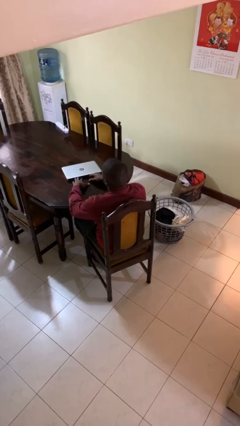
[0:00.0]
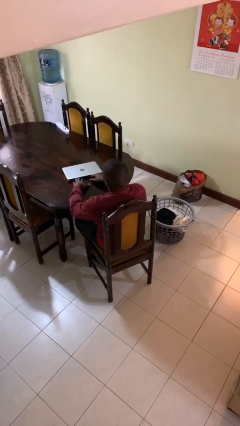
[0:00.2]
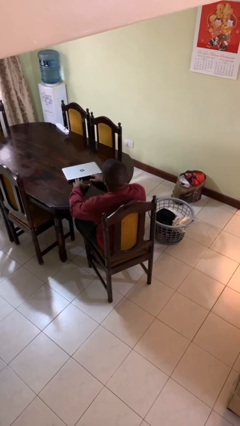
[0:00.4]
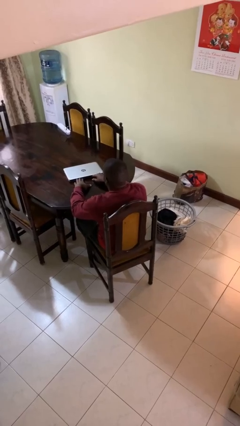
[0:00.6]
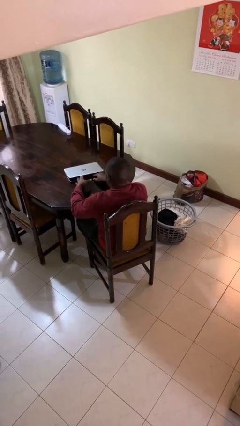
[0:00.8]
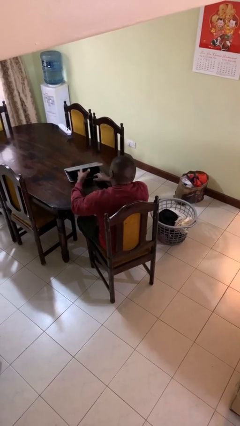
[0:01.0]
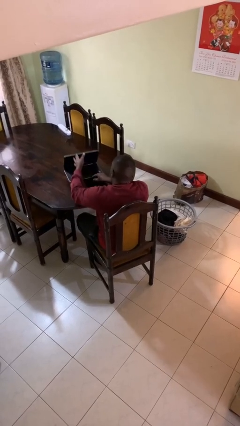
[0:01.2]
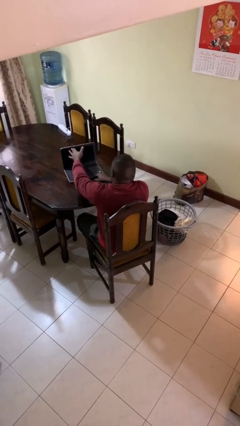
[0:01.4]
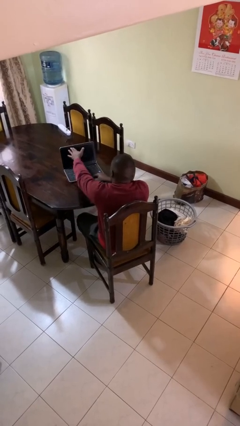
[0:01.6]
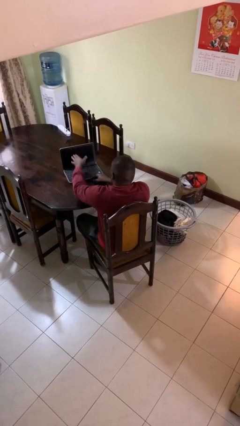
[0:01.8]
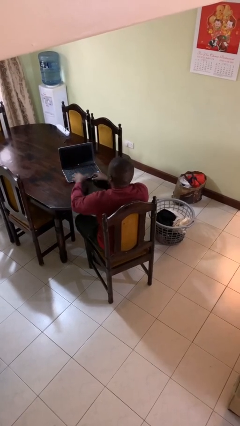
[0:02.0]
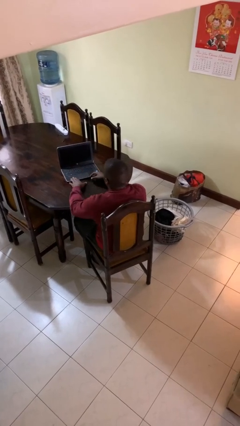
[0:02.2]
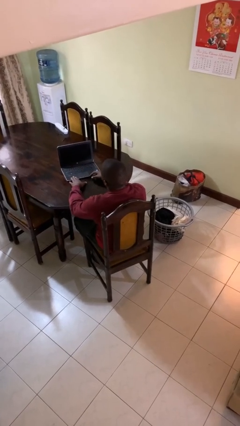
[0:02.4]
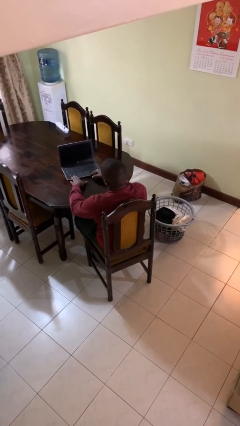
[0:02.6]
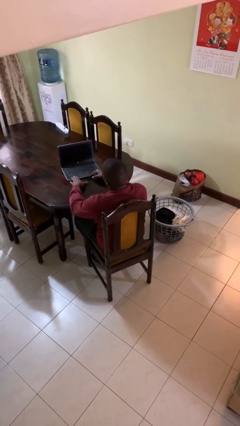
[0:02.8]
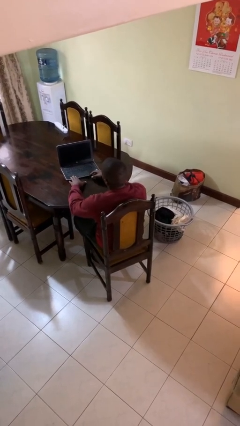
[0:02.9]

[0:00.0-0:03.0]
person opens laptop

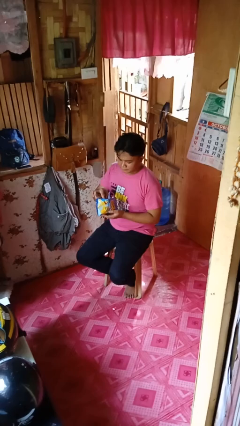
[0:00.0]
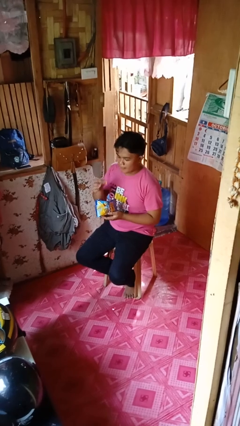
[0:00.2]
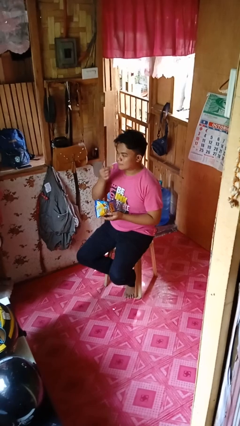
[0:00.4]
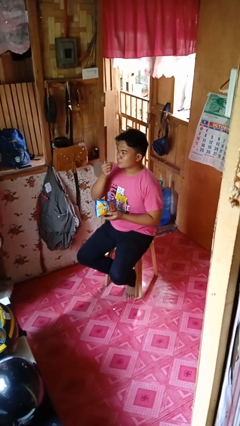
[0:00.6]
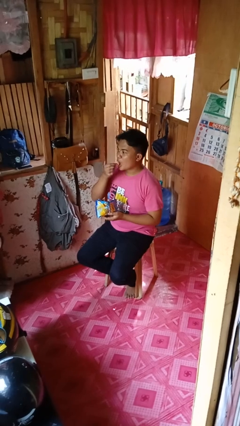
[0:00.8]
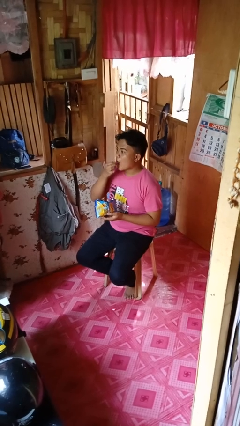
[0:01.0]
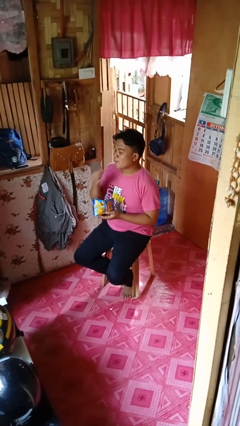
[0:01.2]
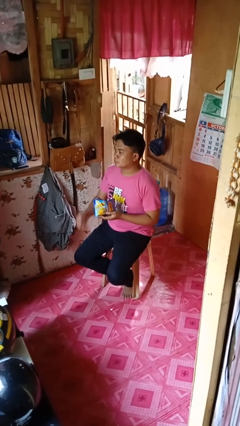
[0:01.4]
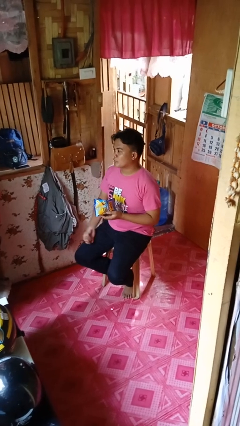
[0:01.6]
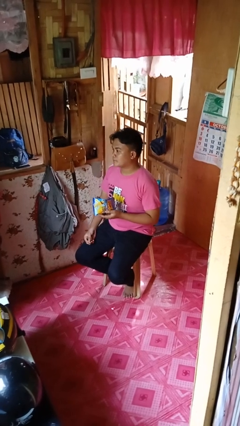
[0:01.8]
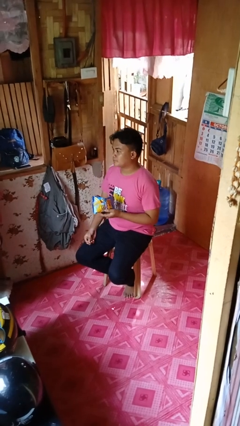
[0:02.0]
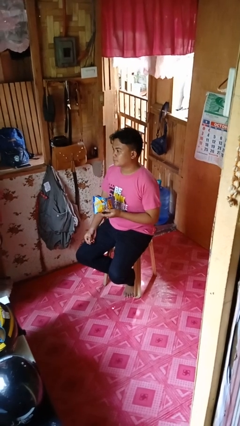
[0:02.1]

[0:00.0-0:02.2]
person eats snack from bag

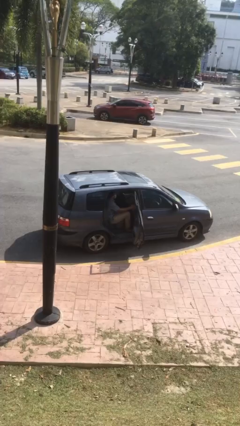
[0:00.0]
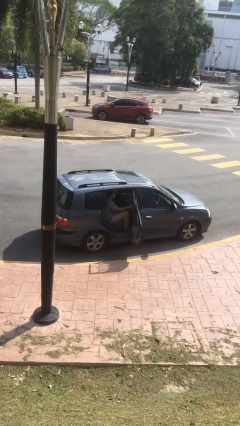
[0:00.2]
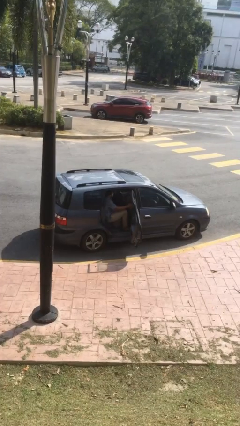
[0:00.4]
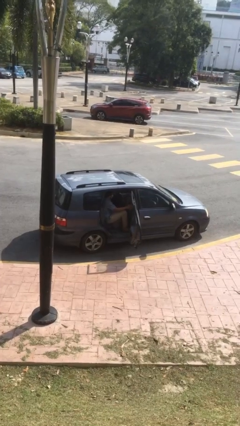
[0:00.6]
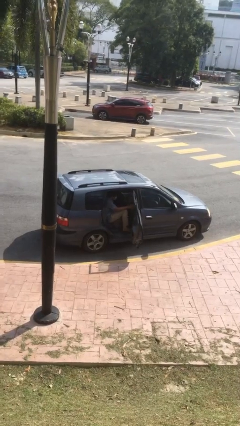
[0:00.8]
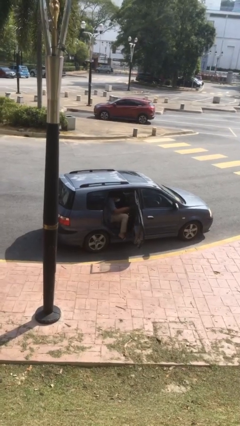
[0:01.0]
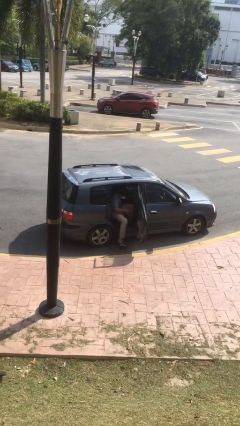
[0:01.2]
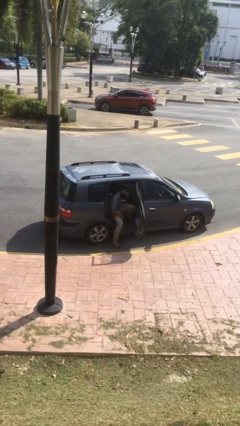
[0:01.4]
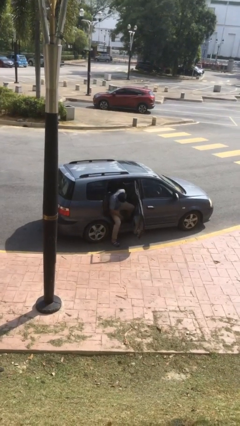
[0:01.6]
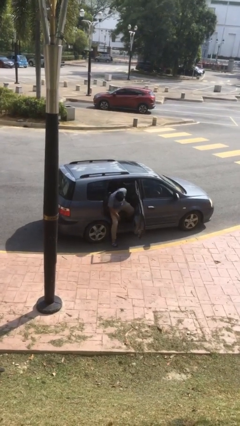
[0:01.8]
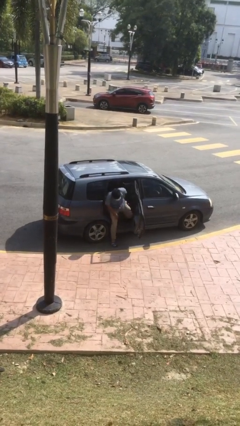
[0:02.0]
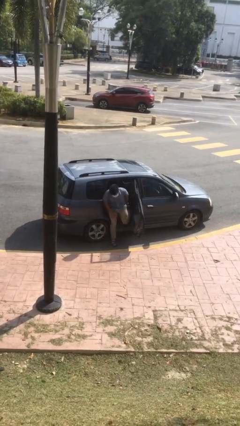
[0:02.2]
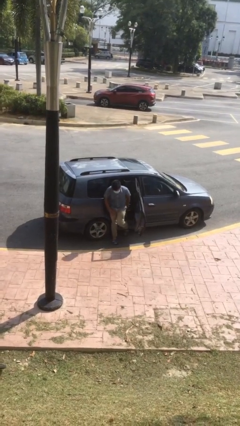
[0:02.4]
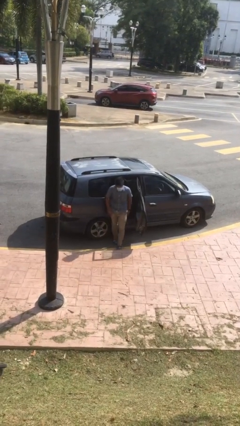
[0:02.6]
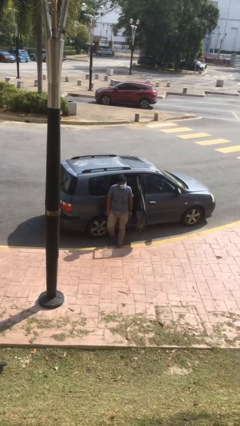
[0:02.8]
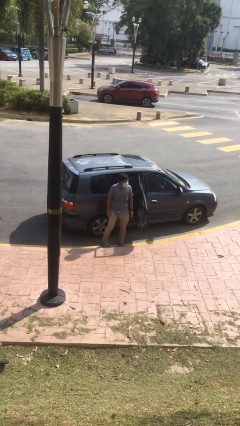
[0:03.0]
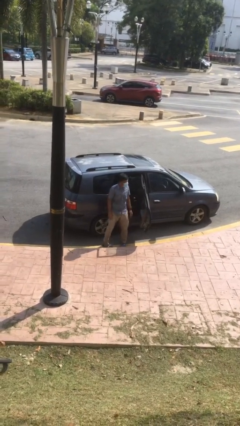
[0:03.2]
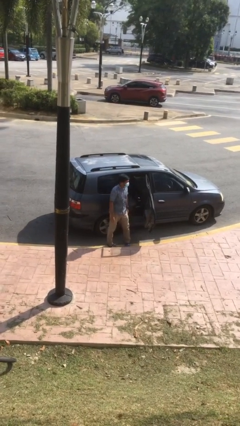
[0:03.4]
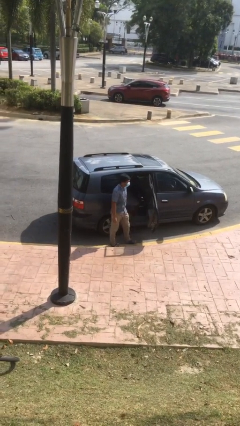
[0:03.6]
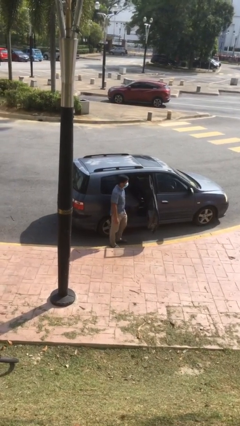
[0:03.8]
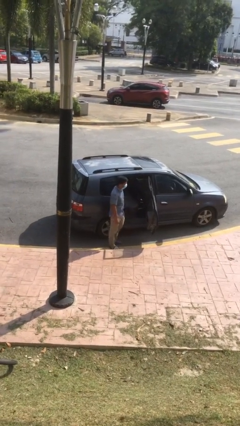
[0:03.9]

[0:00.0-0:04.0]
person exits car

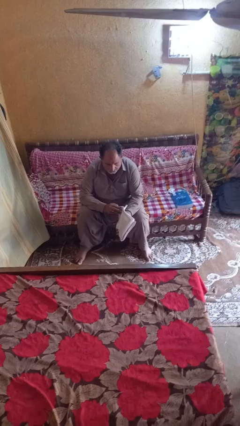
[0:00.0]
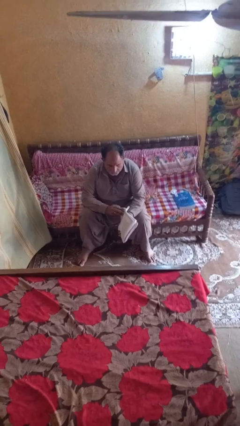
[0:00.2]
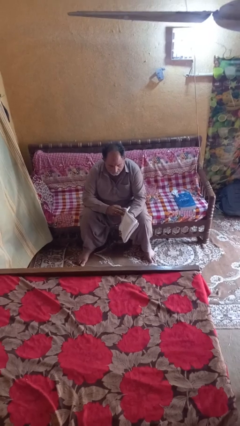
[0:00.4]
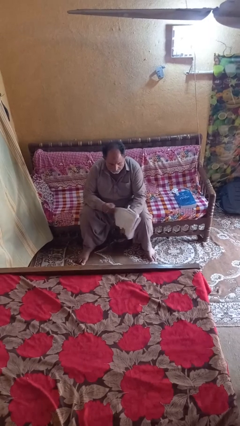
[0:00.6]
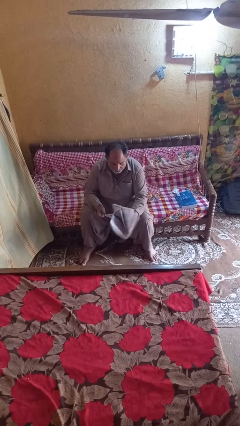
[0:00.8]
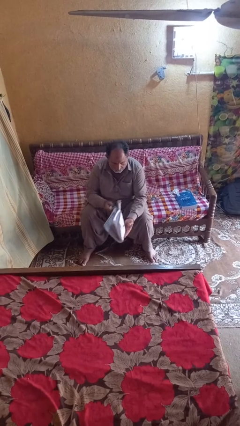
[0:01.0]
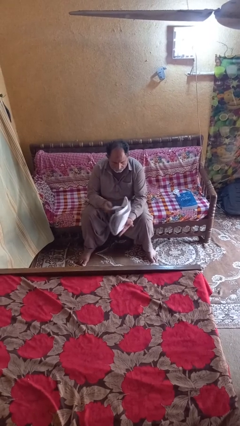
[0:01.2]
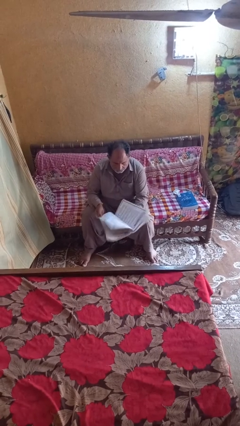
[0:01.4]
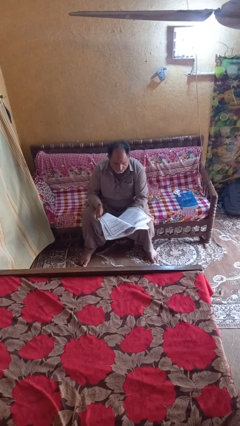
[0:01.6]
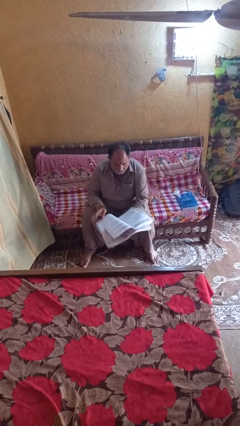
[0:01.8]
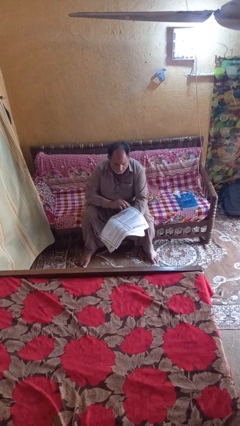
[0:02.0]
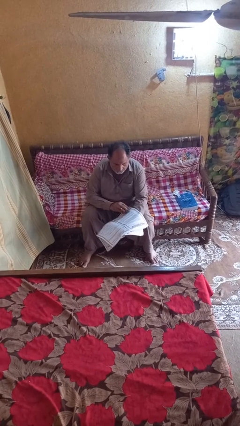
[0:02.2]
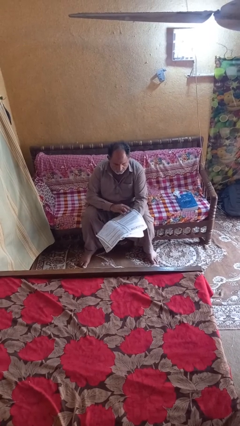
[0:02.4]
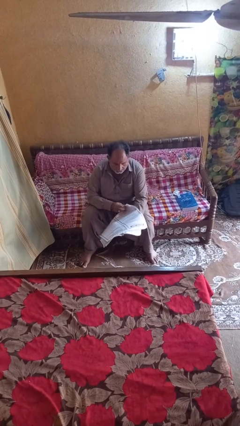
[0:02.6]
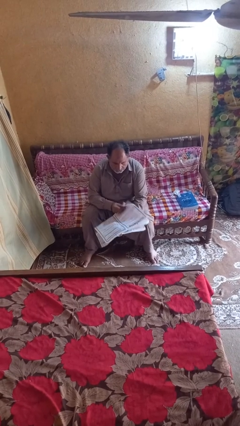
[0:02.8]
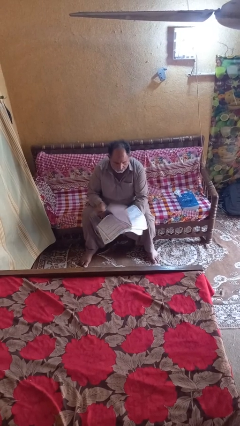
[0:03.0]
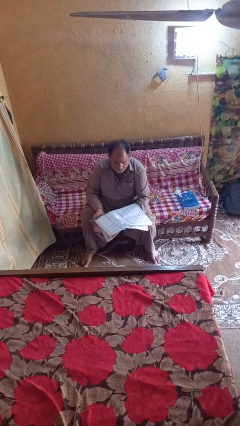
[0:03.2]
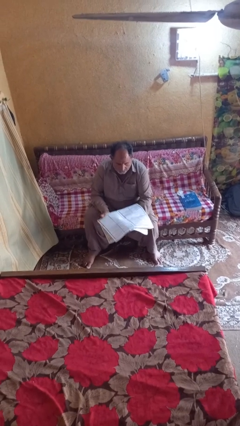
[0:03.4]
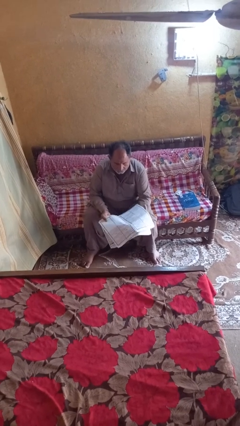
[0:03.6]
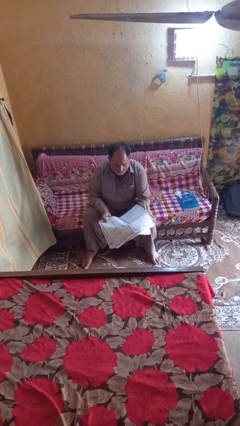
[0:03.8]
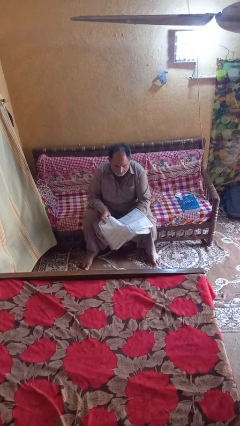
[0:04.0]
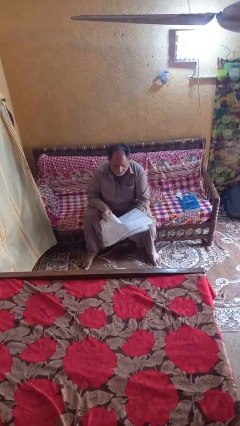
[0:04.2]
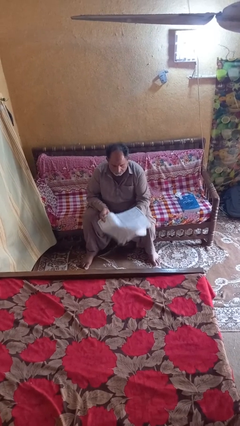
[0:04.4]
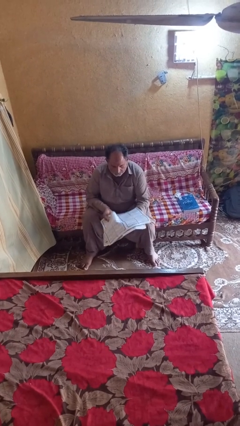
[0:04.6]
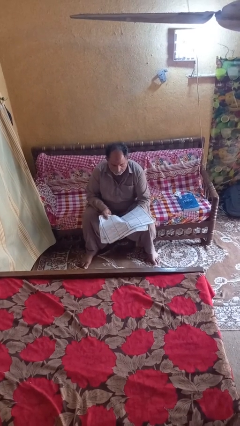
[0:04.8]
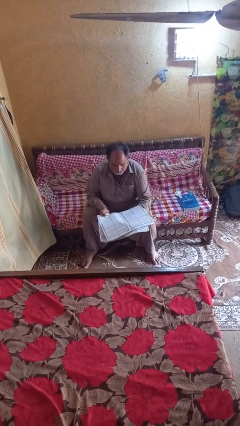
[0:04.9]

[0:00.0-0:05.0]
person reads magazine

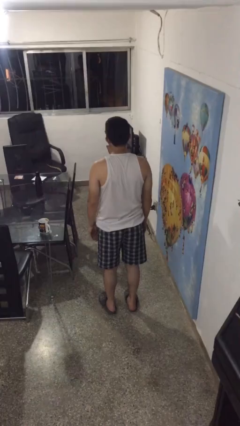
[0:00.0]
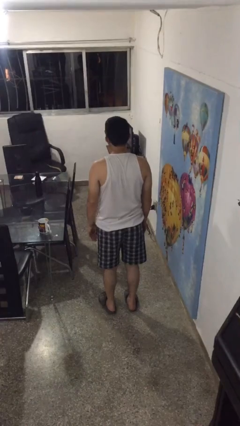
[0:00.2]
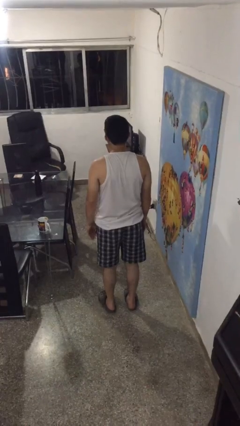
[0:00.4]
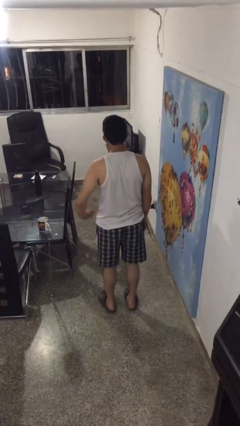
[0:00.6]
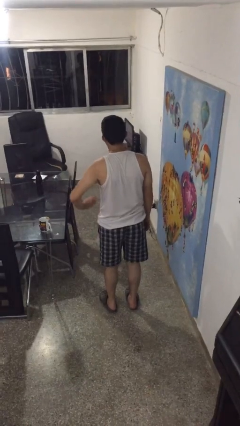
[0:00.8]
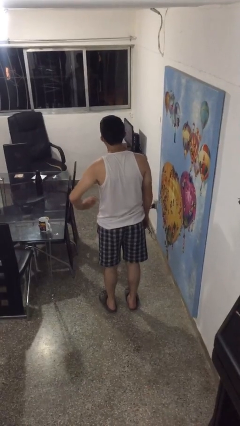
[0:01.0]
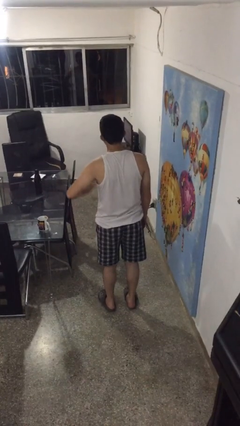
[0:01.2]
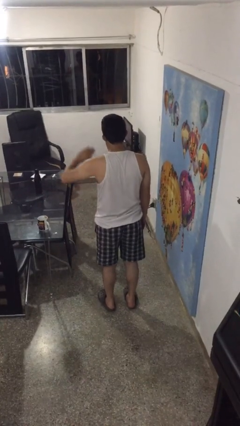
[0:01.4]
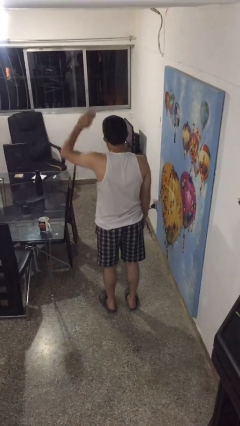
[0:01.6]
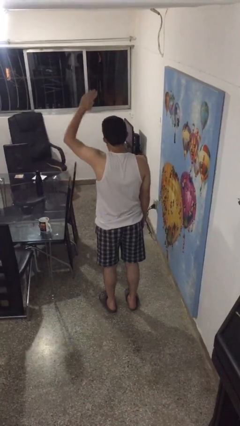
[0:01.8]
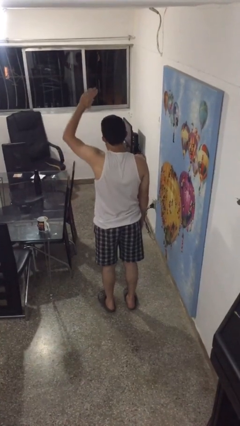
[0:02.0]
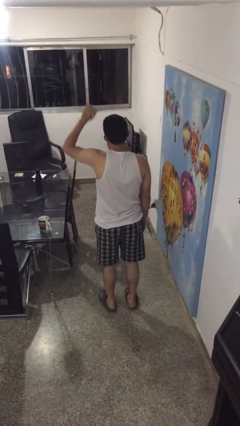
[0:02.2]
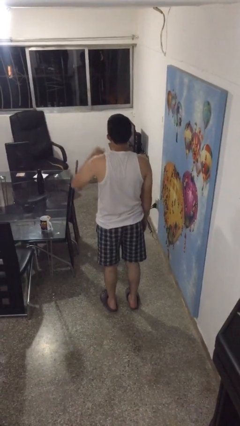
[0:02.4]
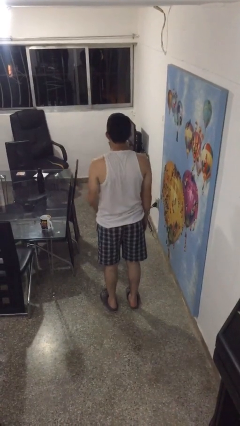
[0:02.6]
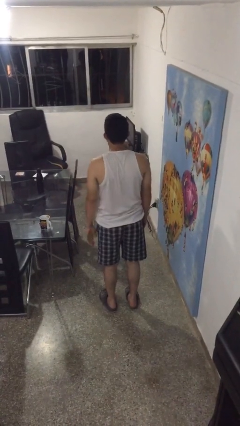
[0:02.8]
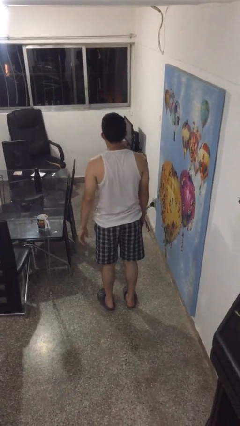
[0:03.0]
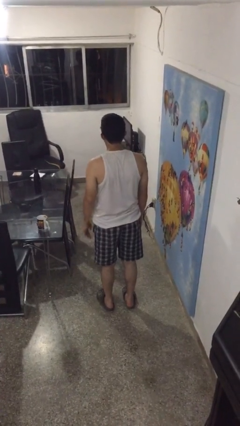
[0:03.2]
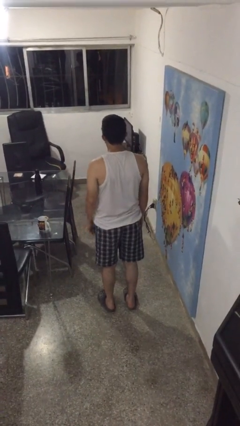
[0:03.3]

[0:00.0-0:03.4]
person gestures swipe up
